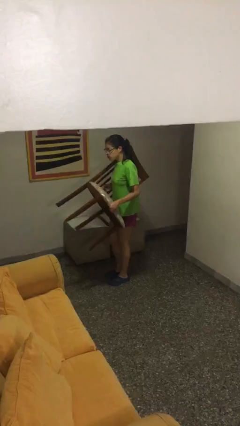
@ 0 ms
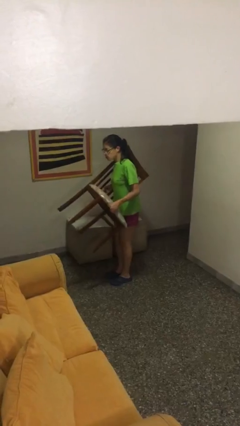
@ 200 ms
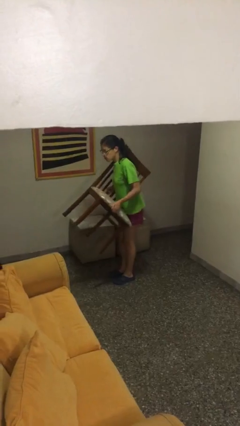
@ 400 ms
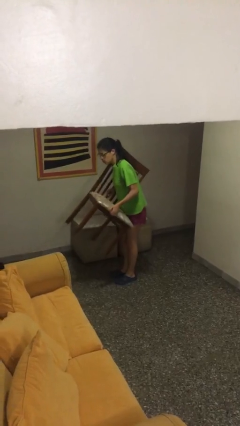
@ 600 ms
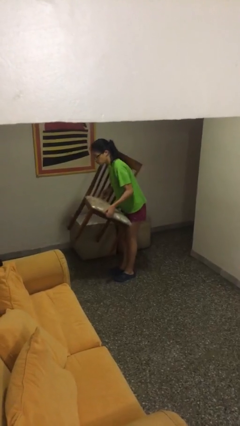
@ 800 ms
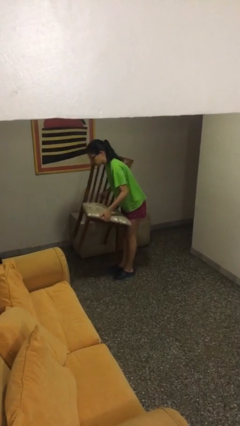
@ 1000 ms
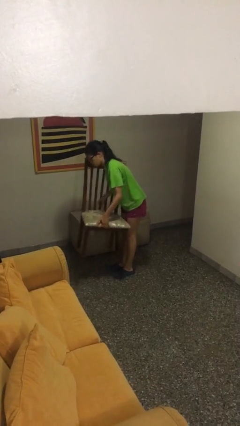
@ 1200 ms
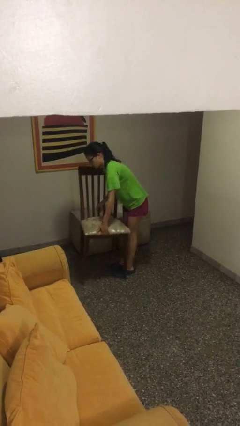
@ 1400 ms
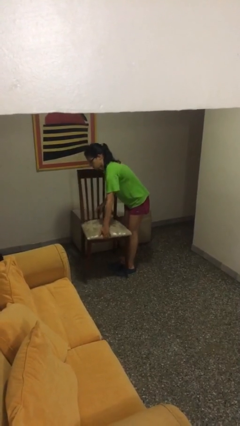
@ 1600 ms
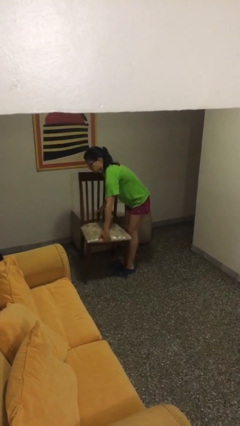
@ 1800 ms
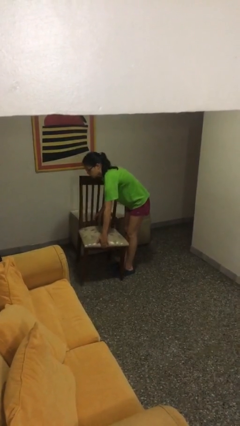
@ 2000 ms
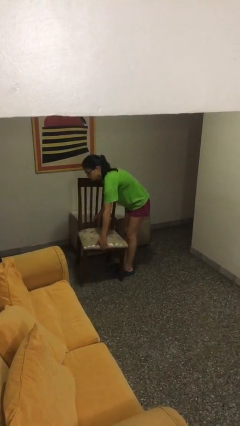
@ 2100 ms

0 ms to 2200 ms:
person puts down object on floor

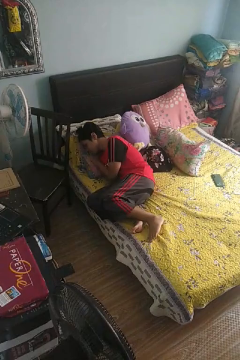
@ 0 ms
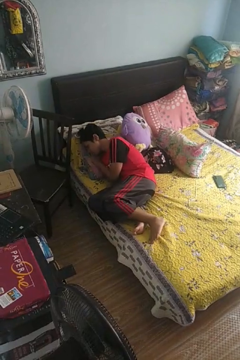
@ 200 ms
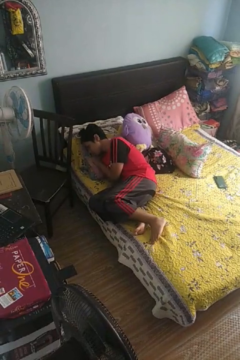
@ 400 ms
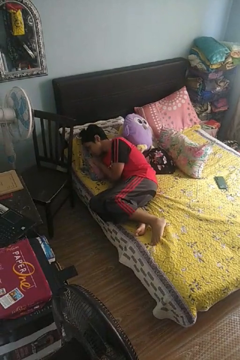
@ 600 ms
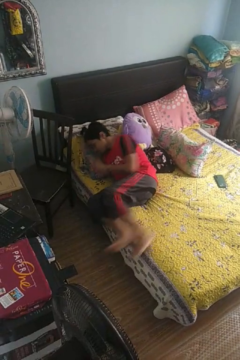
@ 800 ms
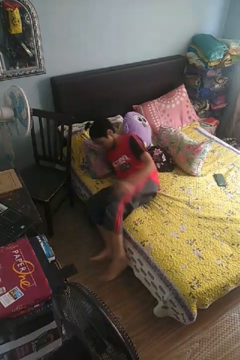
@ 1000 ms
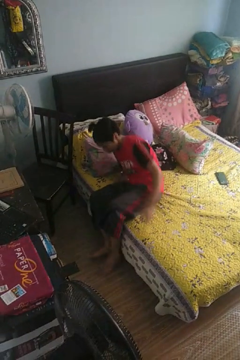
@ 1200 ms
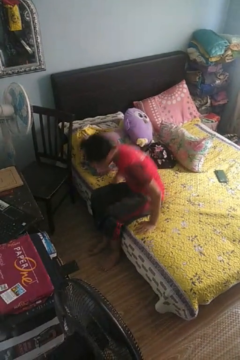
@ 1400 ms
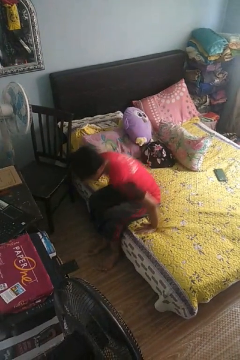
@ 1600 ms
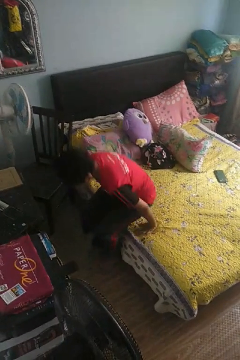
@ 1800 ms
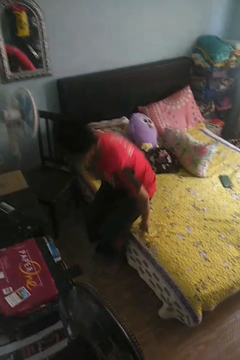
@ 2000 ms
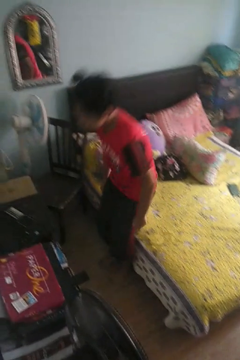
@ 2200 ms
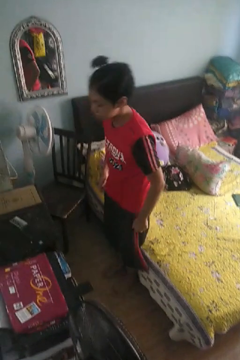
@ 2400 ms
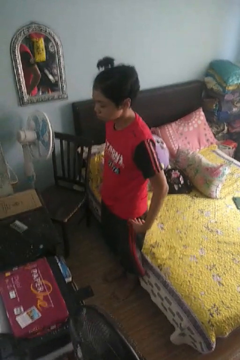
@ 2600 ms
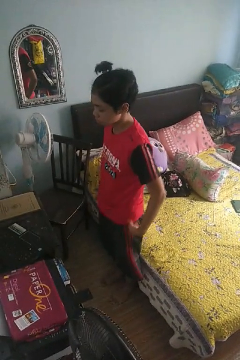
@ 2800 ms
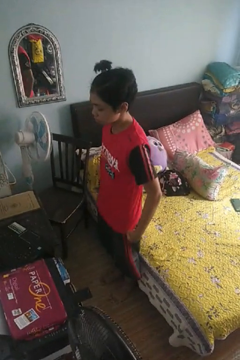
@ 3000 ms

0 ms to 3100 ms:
person stands up

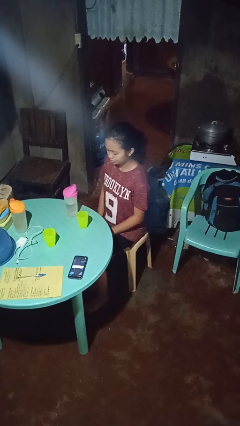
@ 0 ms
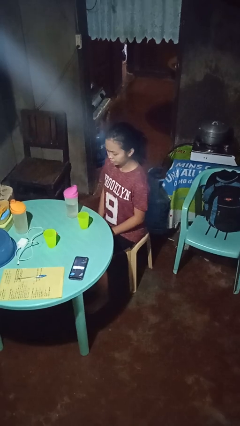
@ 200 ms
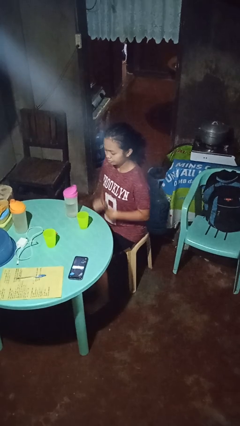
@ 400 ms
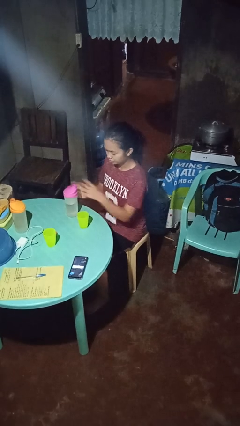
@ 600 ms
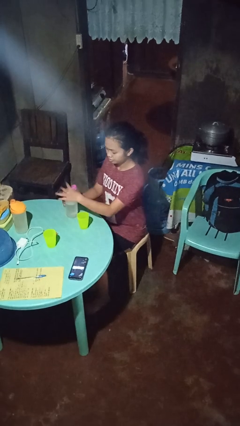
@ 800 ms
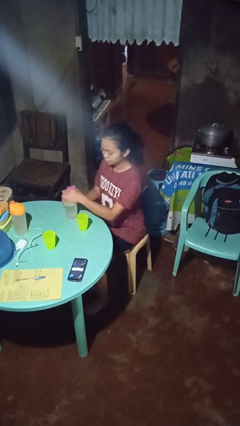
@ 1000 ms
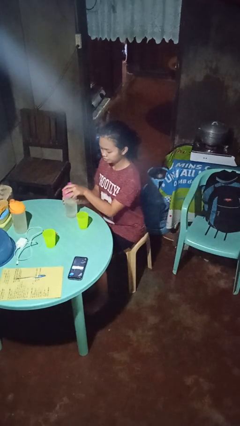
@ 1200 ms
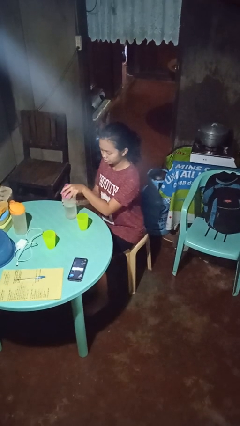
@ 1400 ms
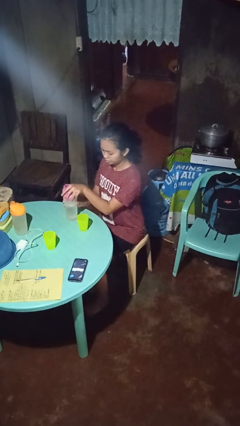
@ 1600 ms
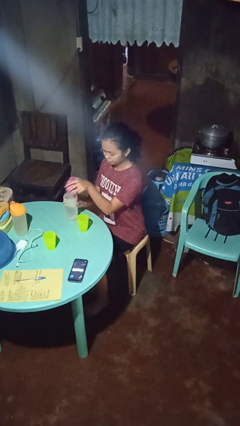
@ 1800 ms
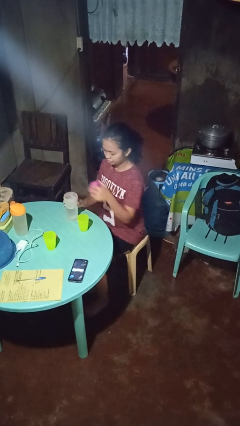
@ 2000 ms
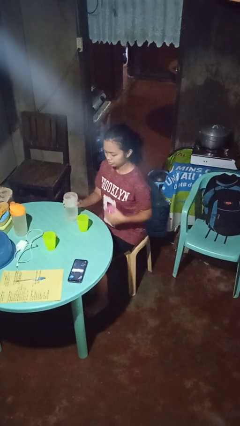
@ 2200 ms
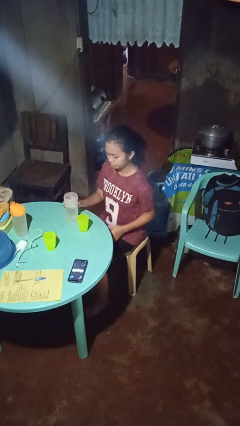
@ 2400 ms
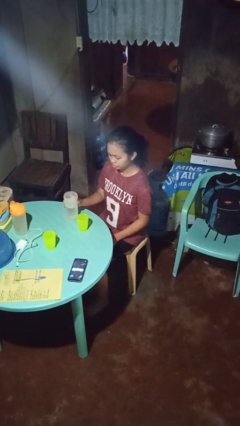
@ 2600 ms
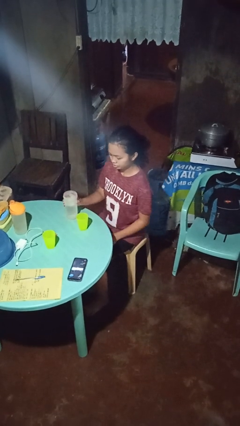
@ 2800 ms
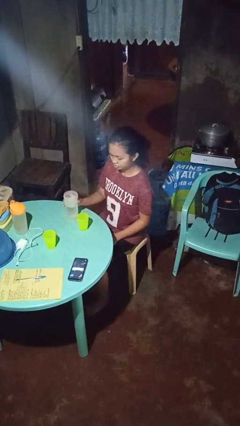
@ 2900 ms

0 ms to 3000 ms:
person unscrews lid from bottle

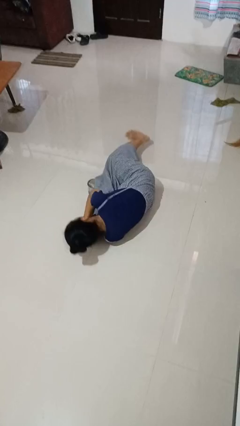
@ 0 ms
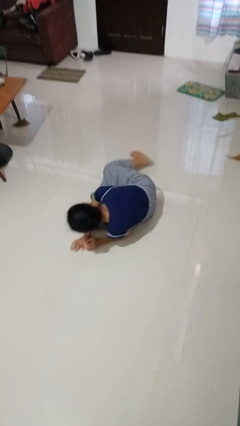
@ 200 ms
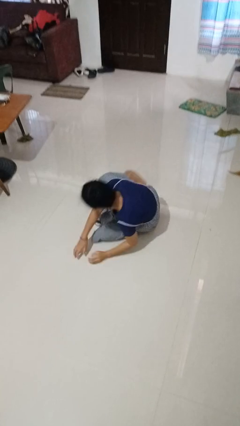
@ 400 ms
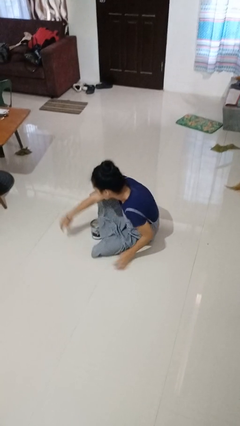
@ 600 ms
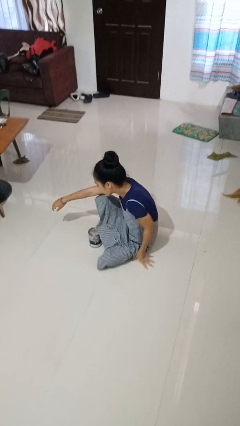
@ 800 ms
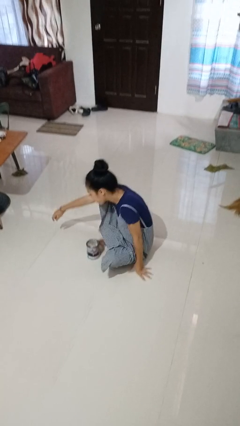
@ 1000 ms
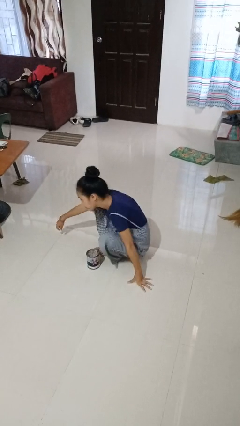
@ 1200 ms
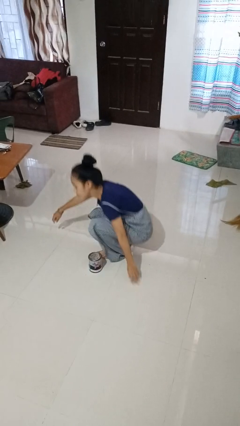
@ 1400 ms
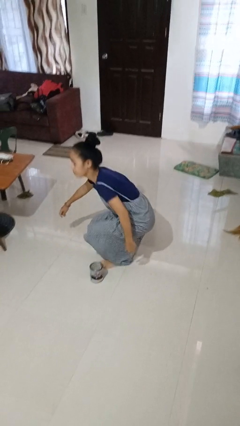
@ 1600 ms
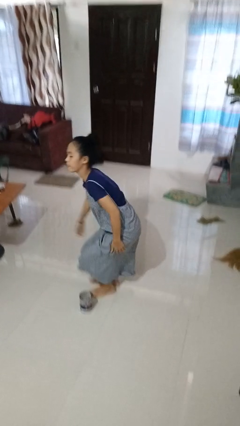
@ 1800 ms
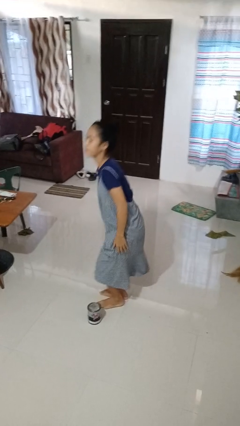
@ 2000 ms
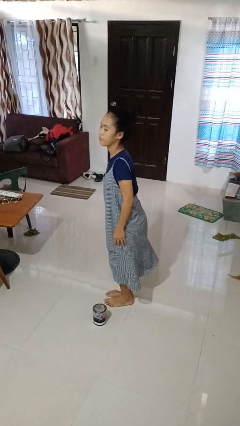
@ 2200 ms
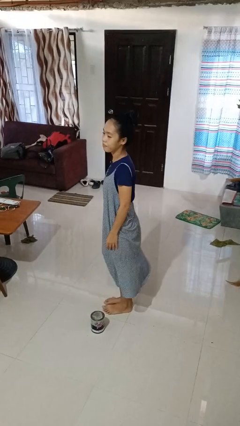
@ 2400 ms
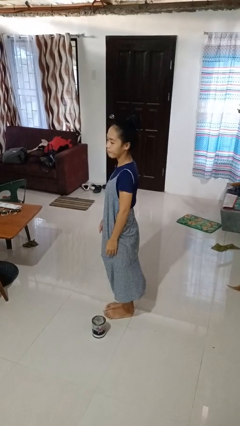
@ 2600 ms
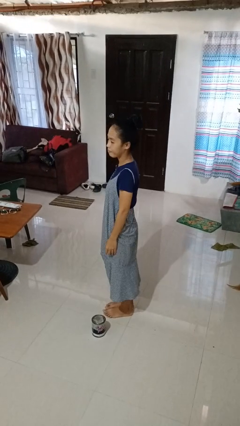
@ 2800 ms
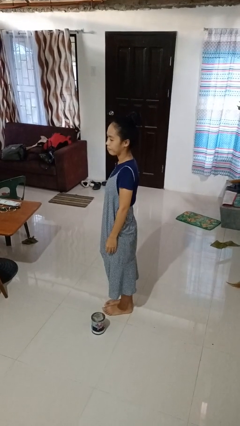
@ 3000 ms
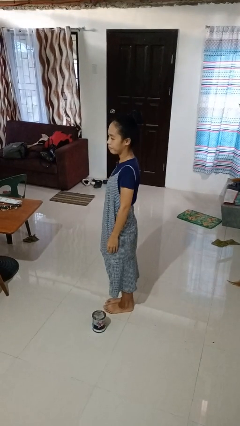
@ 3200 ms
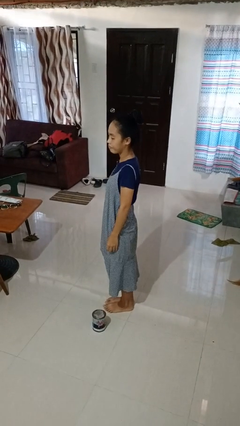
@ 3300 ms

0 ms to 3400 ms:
person stands up from floor

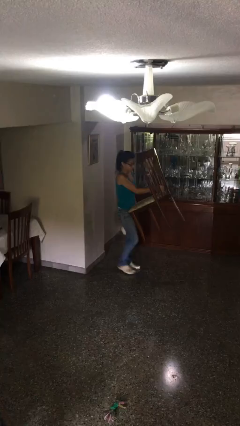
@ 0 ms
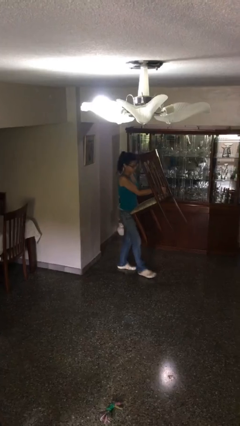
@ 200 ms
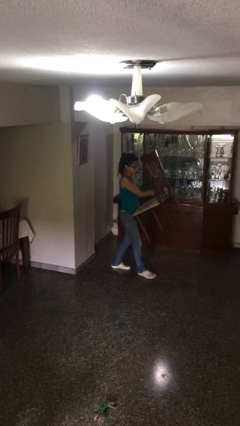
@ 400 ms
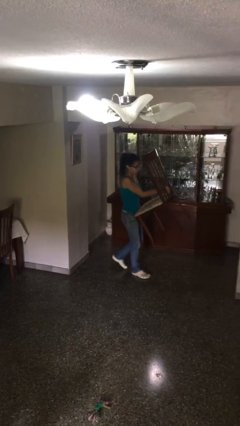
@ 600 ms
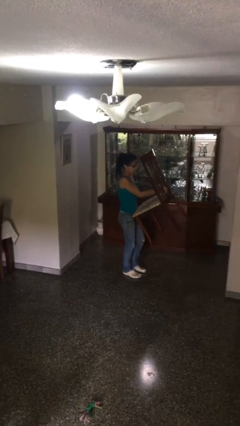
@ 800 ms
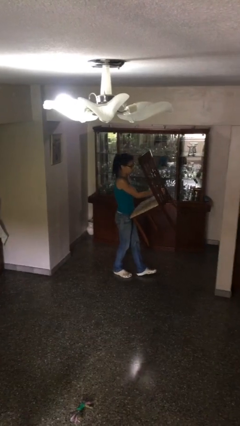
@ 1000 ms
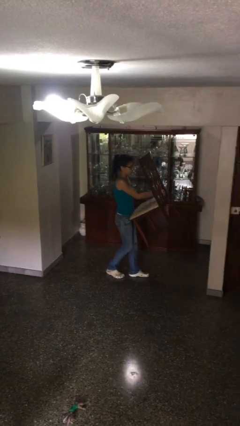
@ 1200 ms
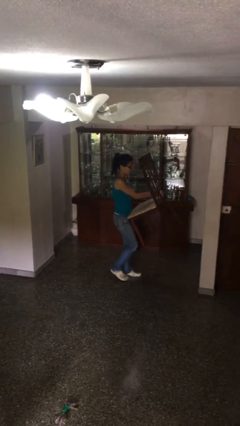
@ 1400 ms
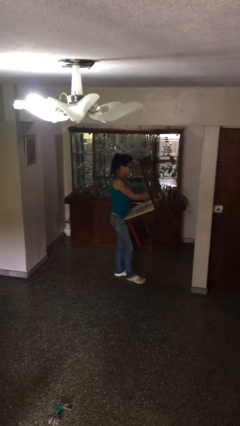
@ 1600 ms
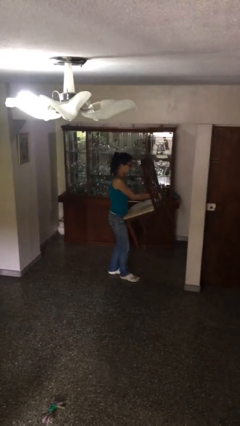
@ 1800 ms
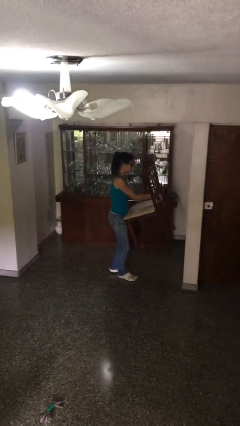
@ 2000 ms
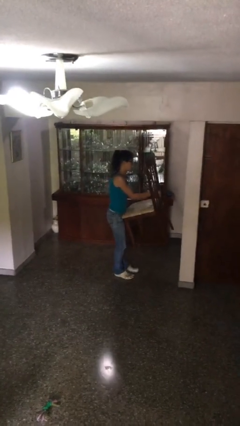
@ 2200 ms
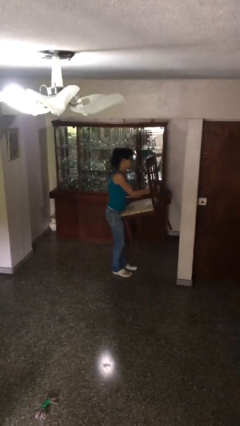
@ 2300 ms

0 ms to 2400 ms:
person carries heavy object

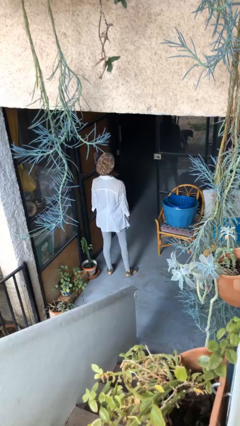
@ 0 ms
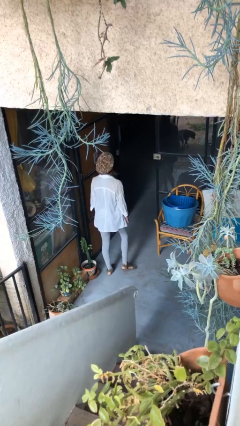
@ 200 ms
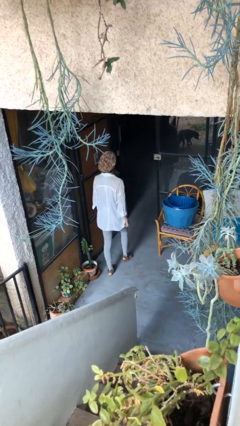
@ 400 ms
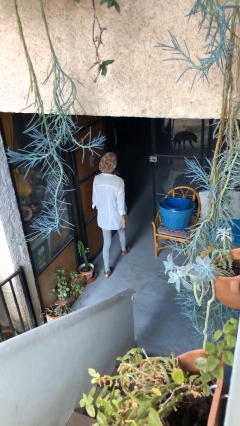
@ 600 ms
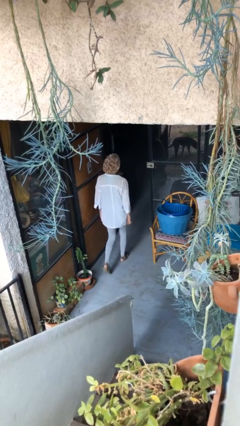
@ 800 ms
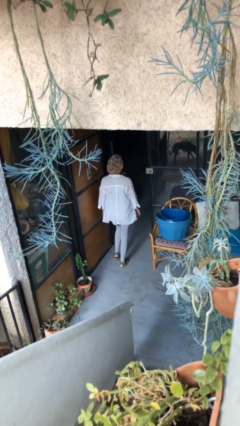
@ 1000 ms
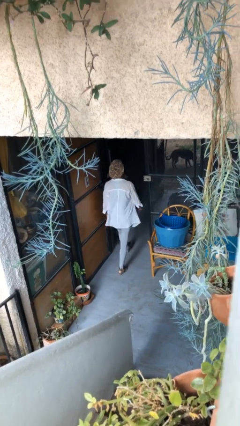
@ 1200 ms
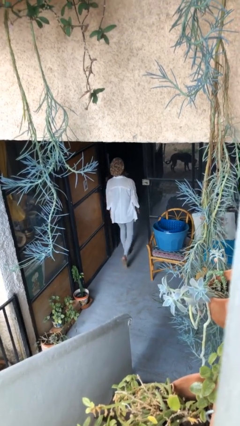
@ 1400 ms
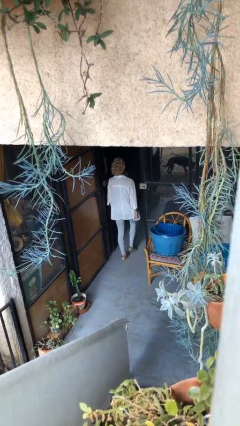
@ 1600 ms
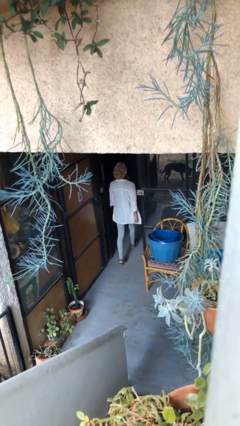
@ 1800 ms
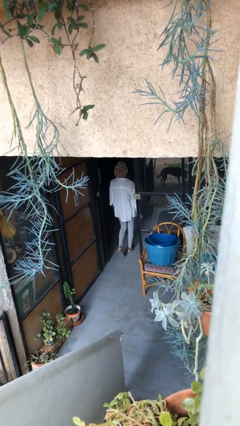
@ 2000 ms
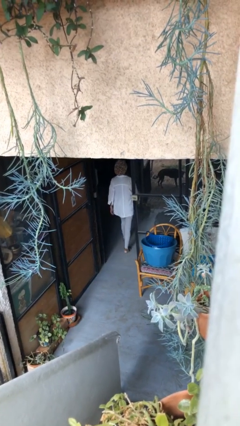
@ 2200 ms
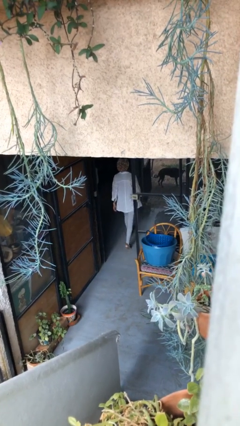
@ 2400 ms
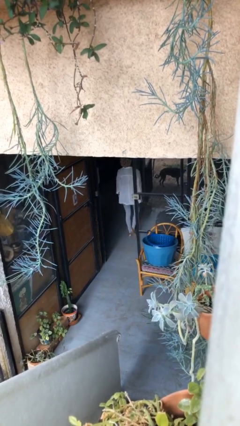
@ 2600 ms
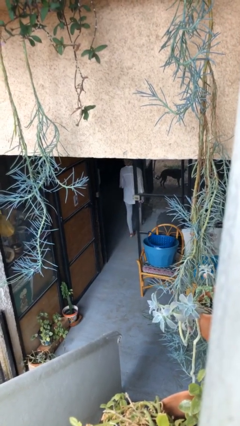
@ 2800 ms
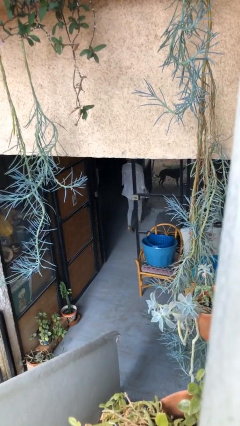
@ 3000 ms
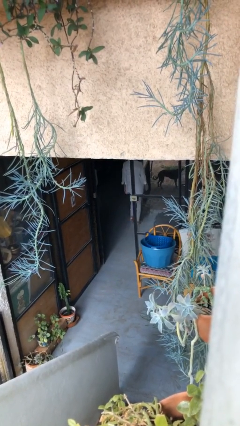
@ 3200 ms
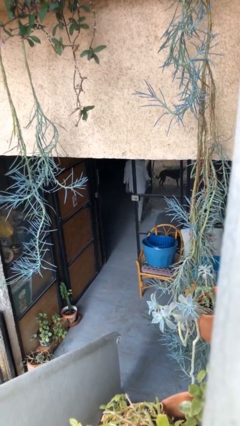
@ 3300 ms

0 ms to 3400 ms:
person exits scene through structure

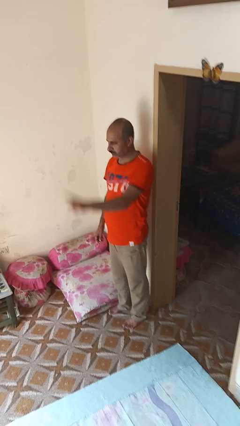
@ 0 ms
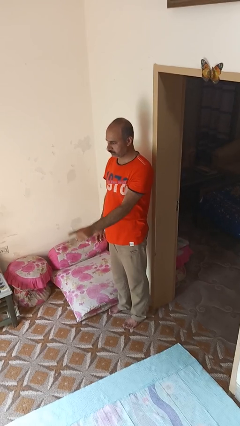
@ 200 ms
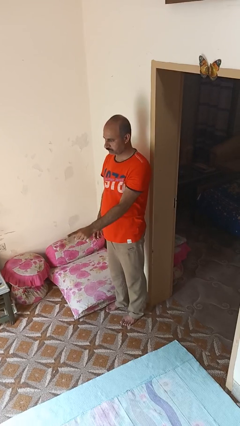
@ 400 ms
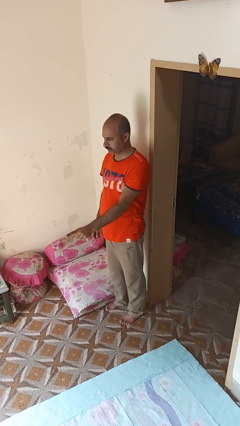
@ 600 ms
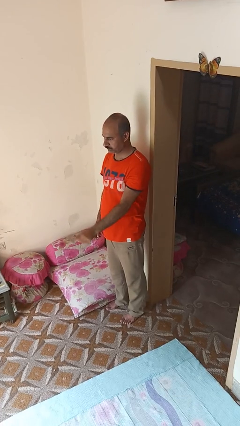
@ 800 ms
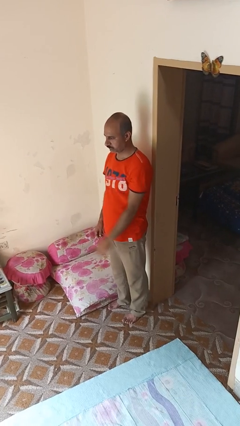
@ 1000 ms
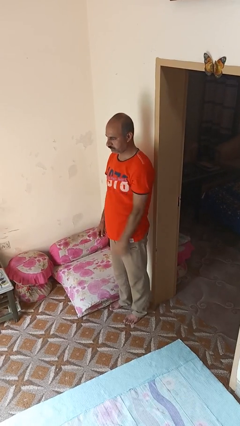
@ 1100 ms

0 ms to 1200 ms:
person gestures swipe down
